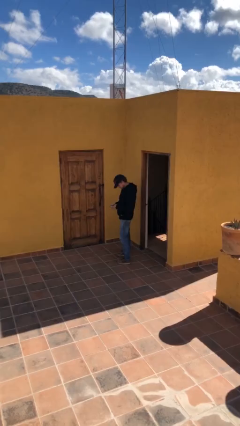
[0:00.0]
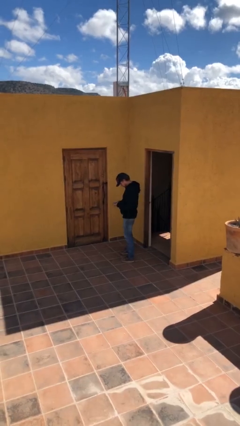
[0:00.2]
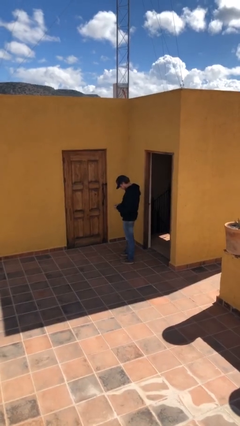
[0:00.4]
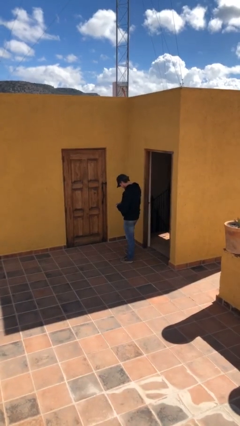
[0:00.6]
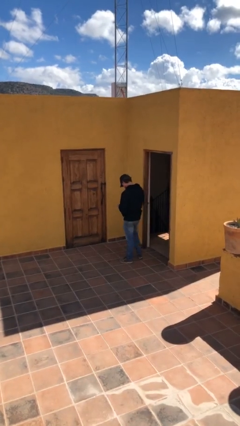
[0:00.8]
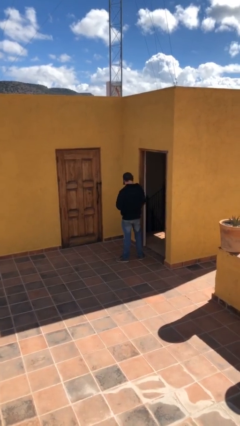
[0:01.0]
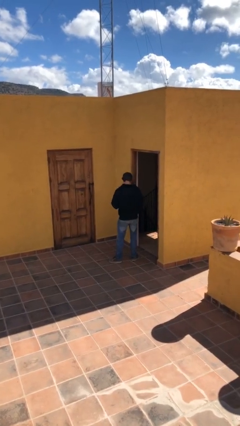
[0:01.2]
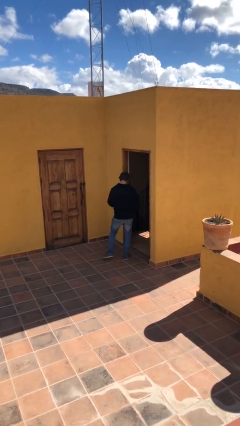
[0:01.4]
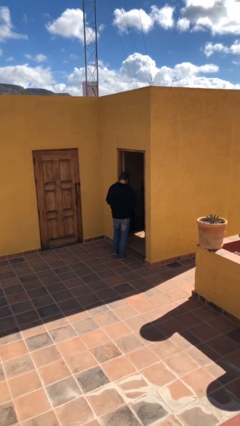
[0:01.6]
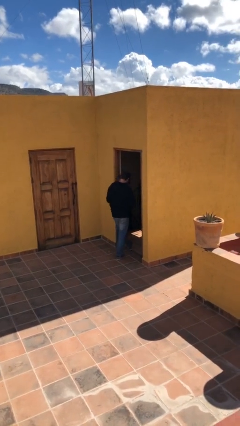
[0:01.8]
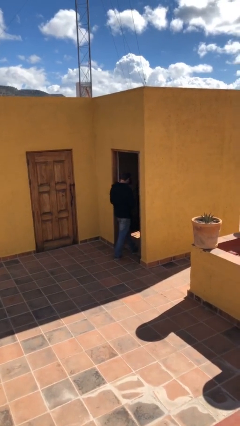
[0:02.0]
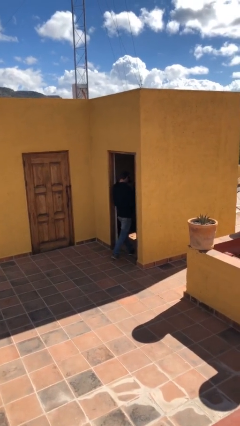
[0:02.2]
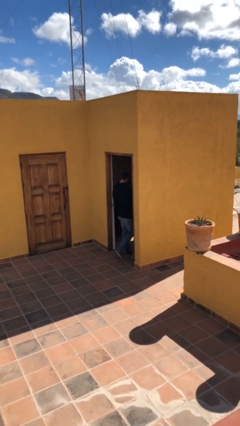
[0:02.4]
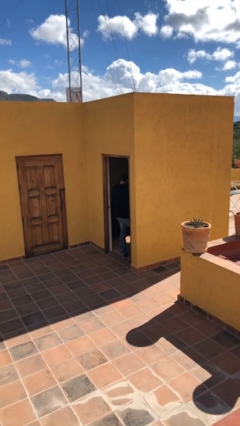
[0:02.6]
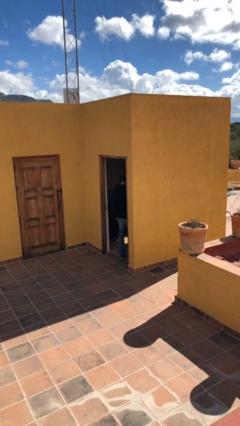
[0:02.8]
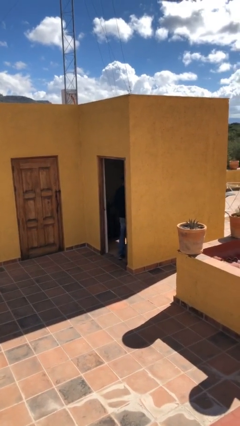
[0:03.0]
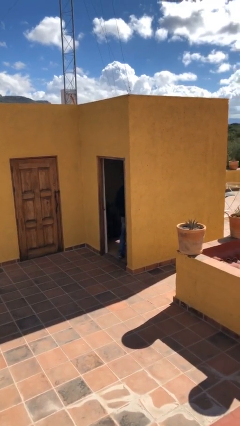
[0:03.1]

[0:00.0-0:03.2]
person exits scene through structure

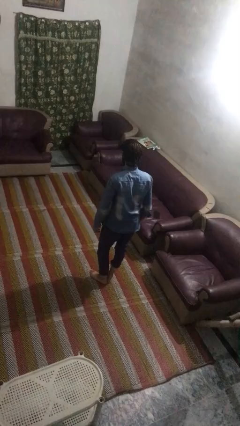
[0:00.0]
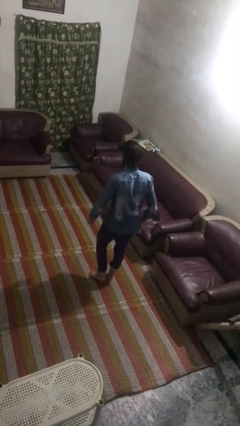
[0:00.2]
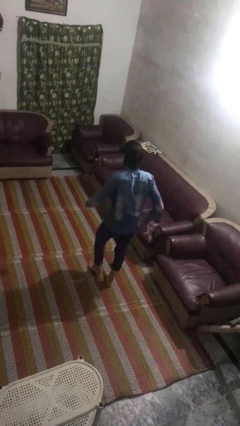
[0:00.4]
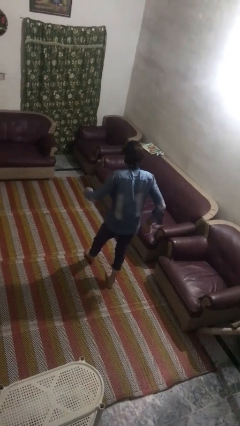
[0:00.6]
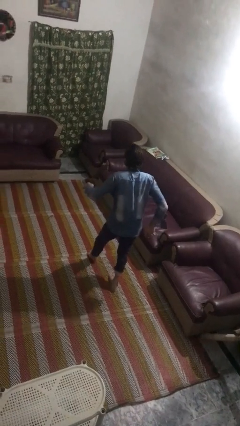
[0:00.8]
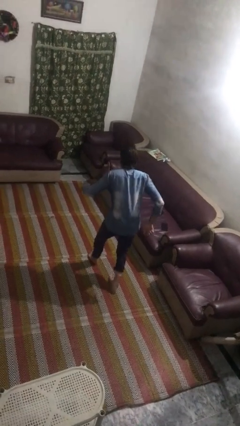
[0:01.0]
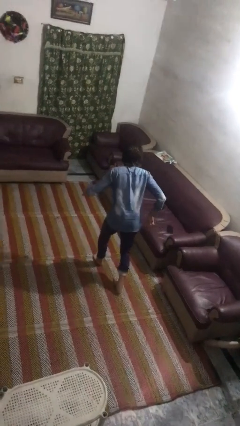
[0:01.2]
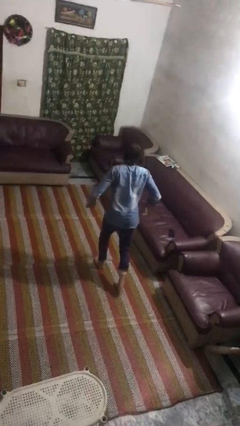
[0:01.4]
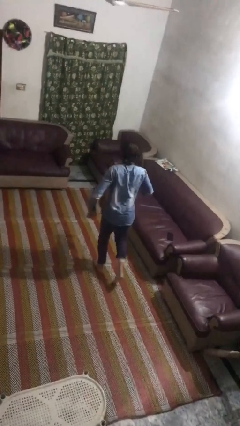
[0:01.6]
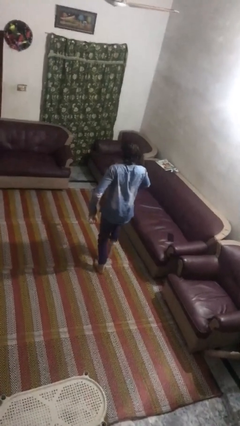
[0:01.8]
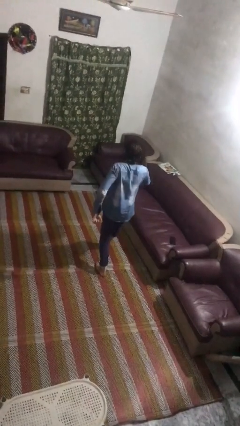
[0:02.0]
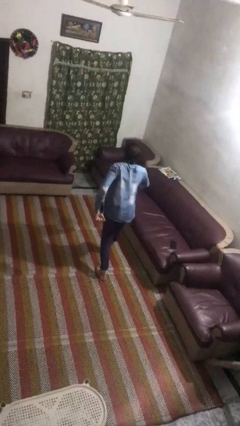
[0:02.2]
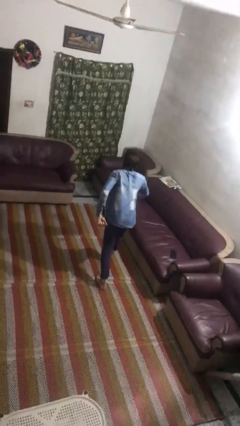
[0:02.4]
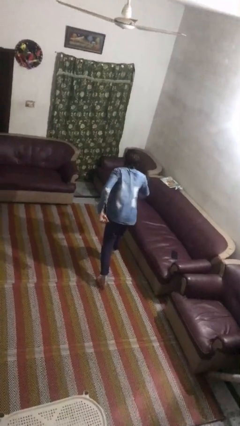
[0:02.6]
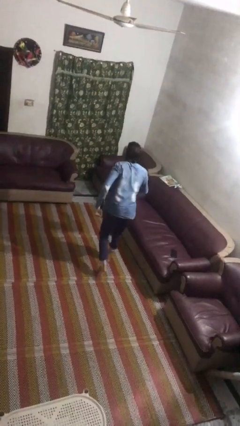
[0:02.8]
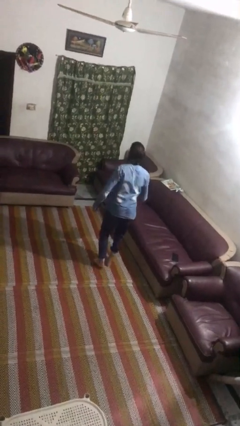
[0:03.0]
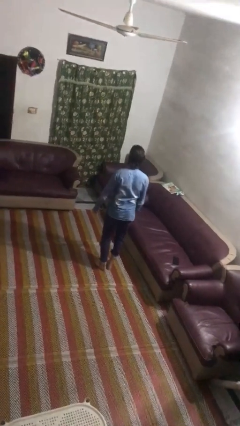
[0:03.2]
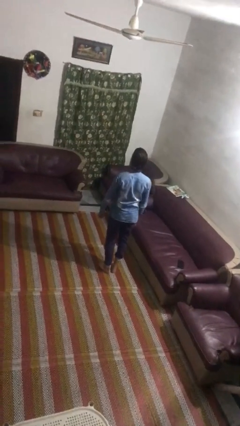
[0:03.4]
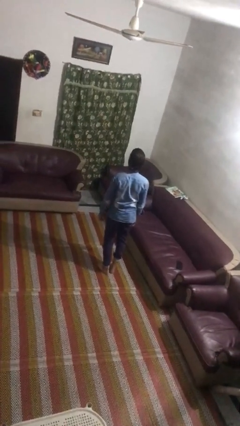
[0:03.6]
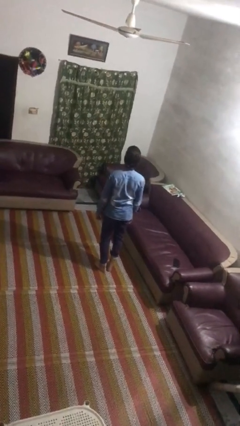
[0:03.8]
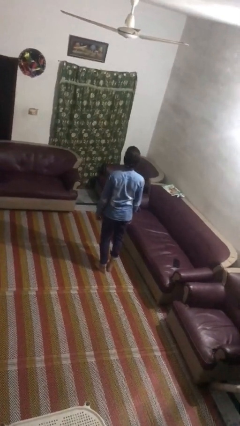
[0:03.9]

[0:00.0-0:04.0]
person walks tiptoe

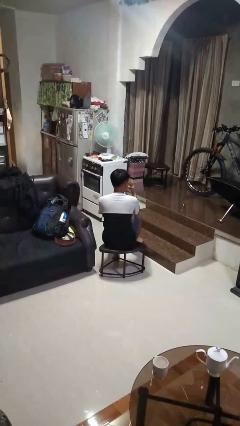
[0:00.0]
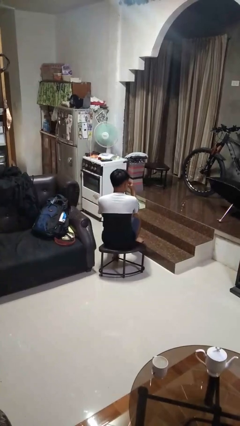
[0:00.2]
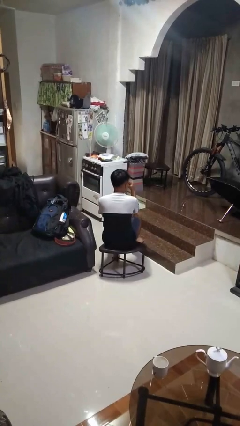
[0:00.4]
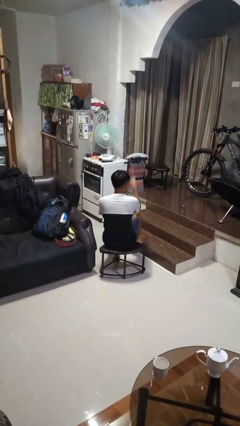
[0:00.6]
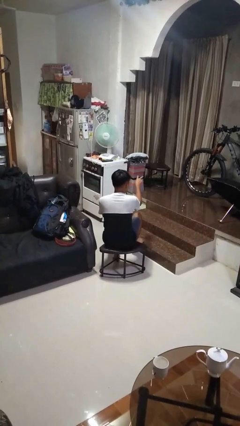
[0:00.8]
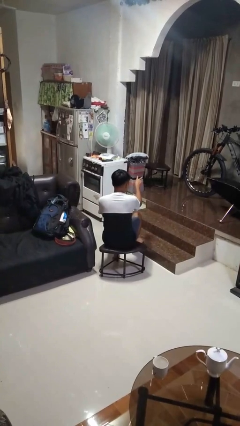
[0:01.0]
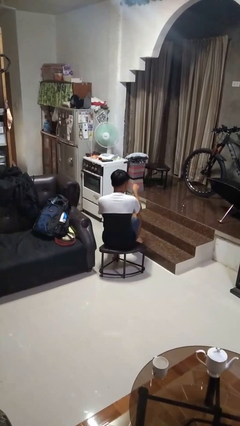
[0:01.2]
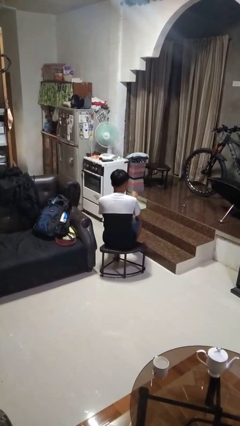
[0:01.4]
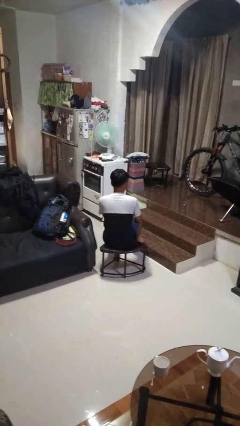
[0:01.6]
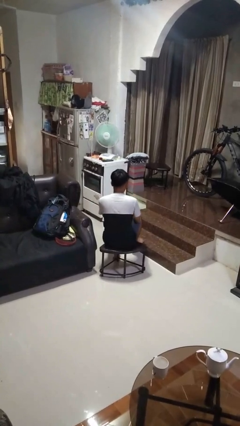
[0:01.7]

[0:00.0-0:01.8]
person gestures watch closely

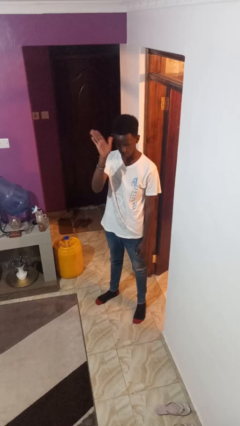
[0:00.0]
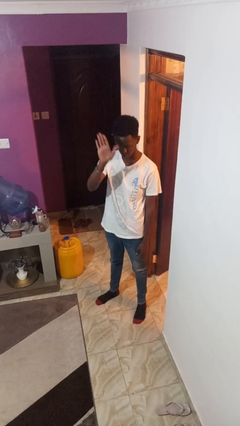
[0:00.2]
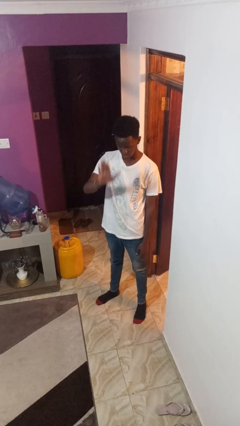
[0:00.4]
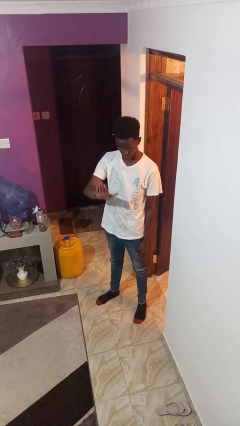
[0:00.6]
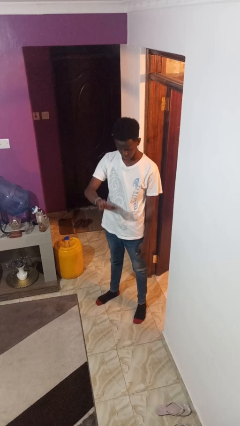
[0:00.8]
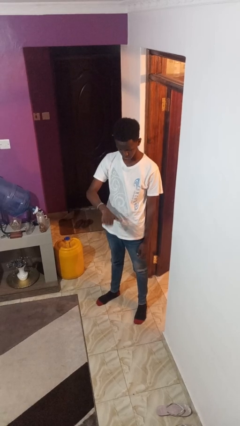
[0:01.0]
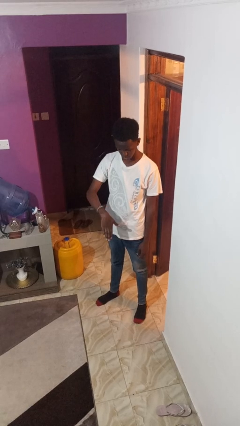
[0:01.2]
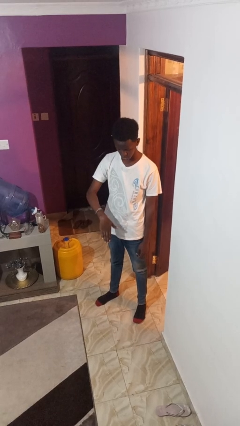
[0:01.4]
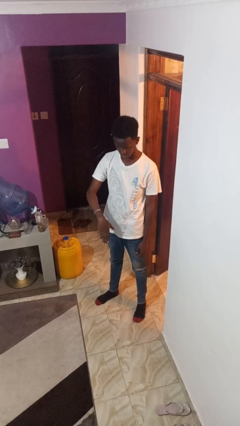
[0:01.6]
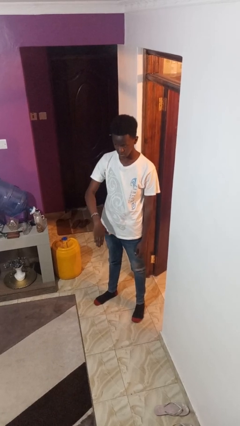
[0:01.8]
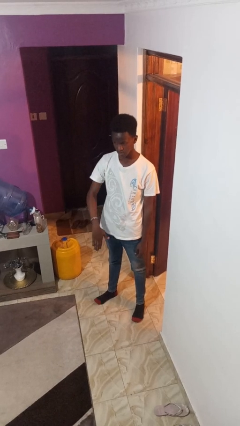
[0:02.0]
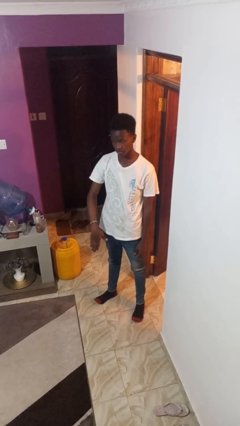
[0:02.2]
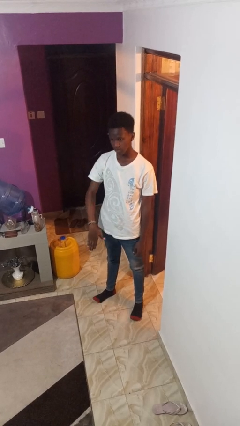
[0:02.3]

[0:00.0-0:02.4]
person gestures swipe down

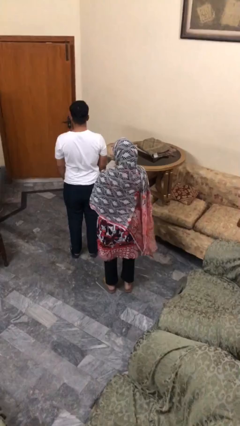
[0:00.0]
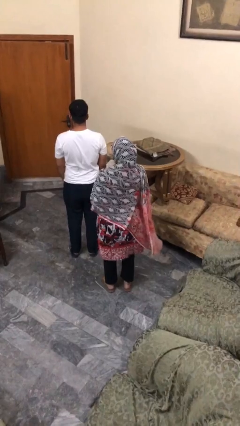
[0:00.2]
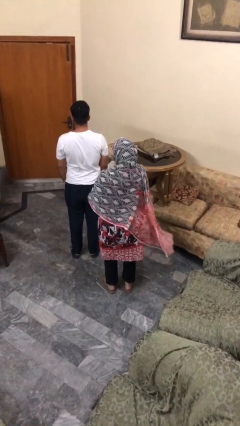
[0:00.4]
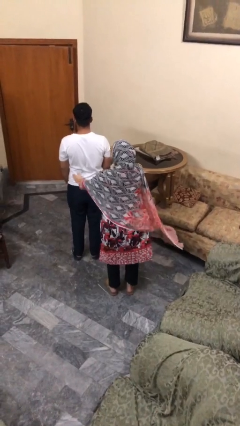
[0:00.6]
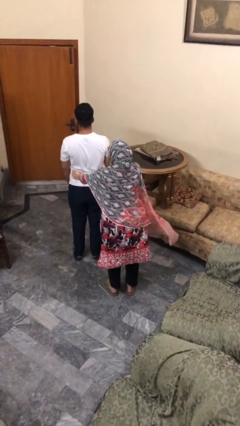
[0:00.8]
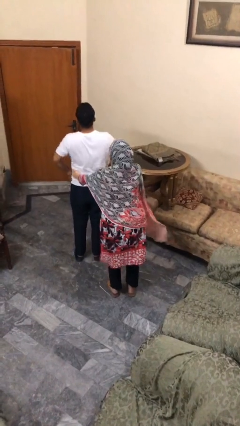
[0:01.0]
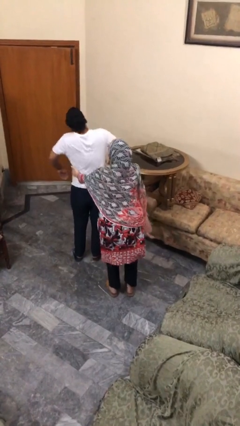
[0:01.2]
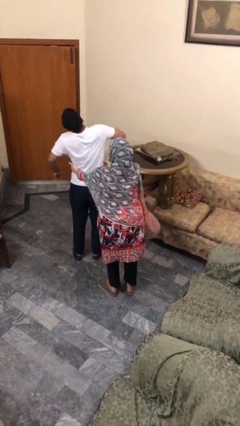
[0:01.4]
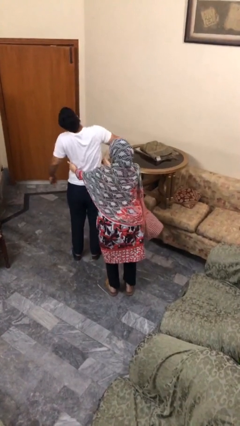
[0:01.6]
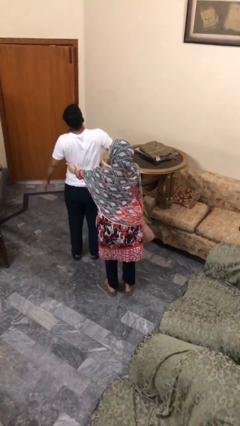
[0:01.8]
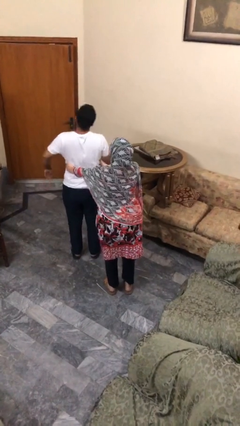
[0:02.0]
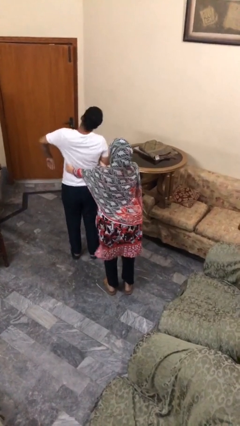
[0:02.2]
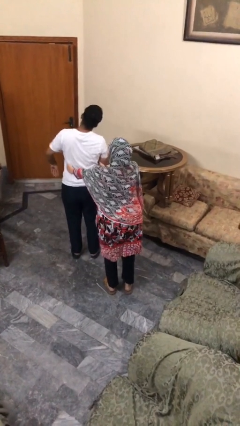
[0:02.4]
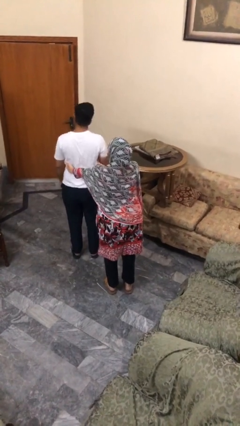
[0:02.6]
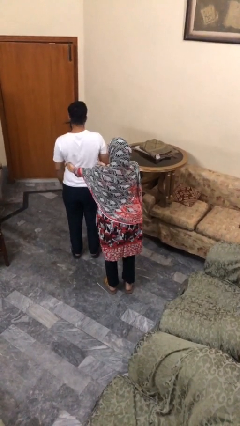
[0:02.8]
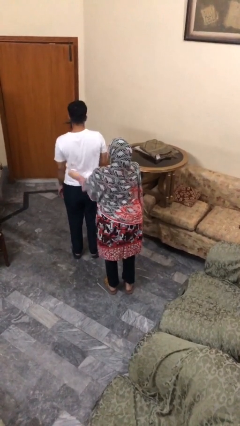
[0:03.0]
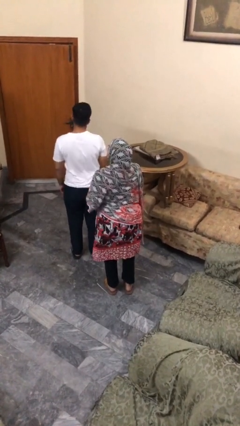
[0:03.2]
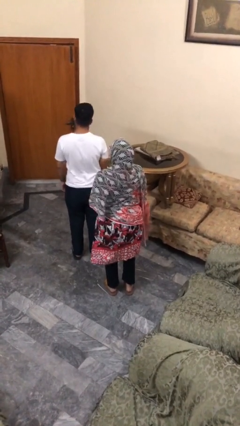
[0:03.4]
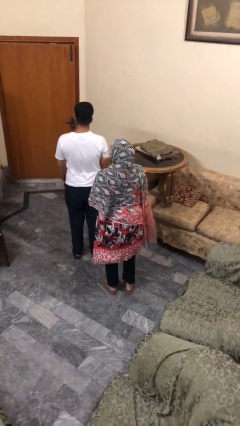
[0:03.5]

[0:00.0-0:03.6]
person tickles person

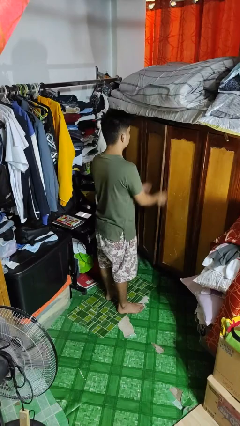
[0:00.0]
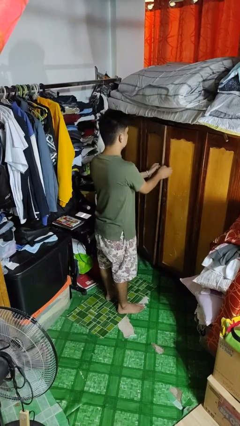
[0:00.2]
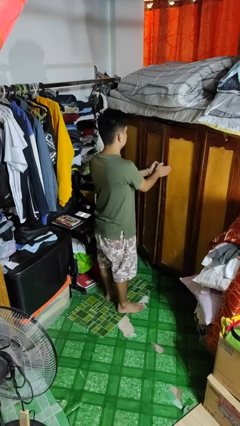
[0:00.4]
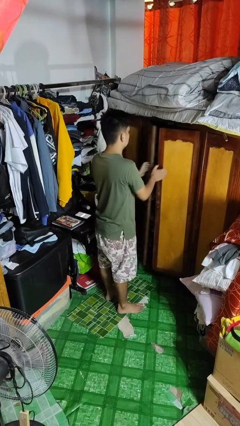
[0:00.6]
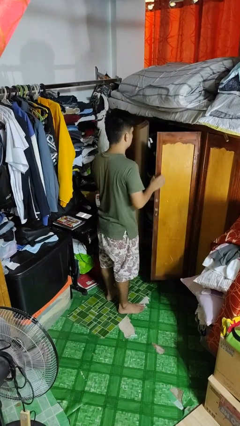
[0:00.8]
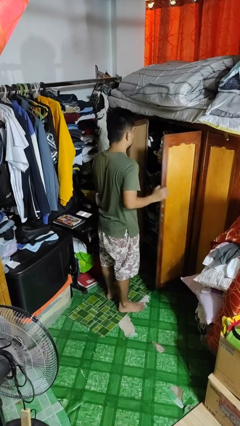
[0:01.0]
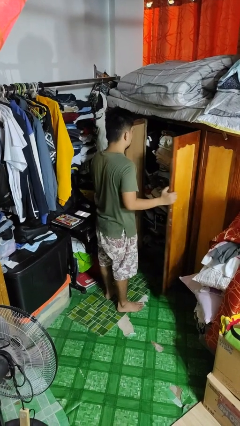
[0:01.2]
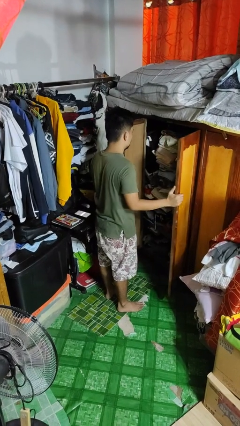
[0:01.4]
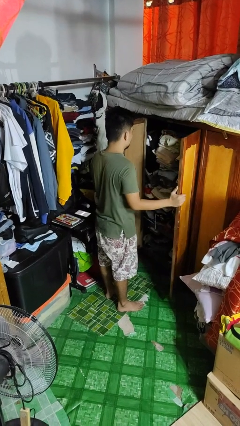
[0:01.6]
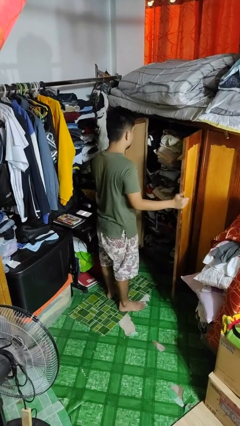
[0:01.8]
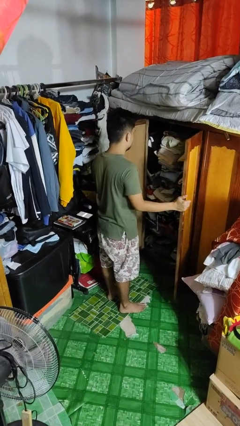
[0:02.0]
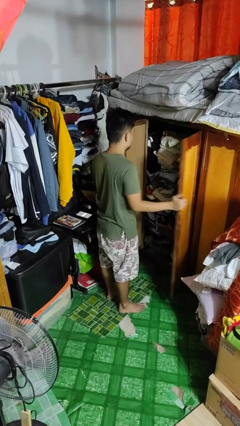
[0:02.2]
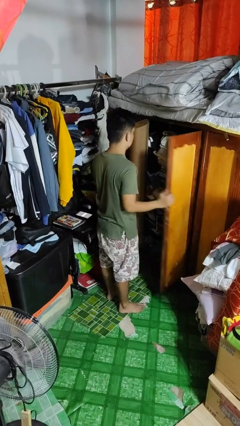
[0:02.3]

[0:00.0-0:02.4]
person opens closet door
